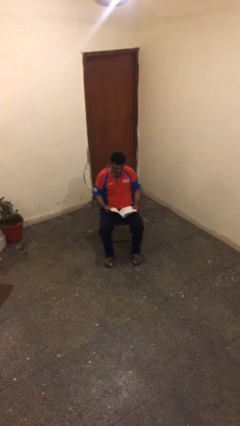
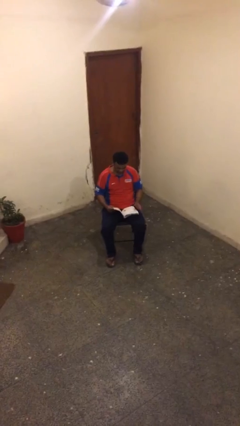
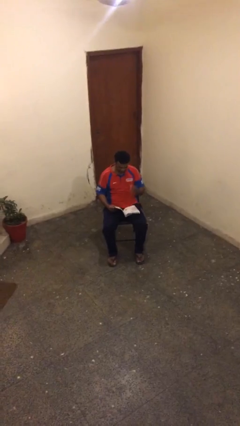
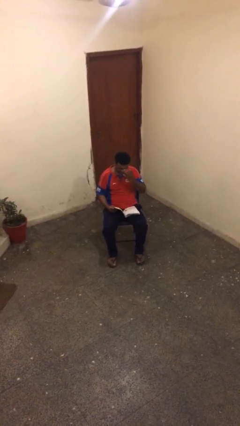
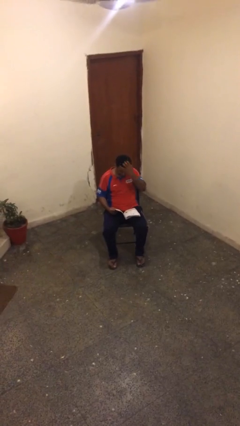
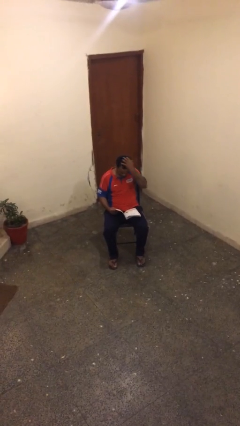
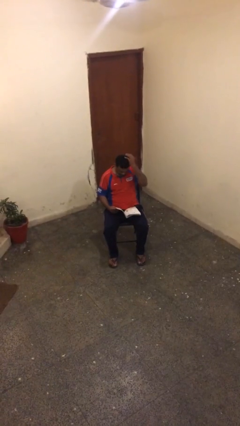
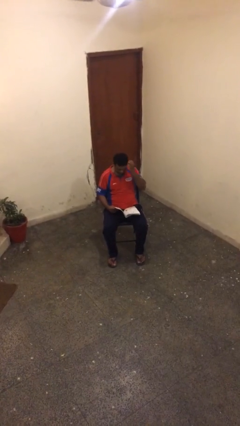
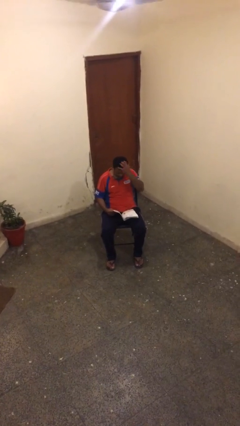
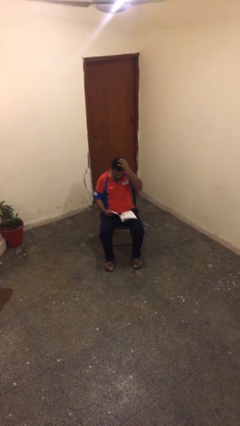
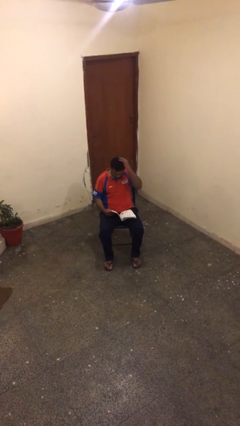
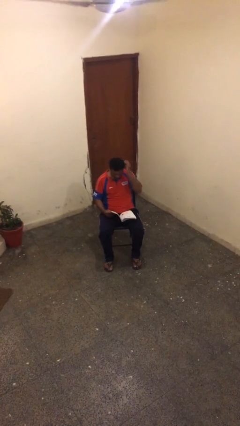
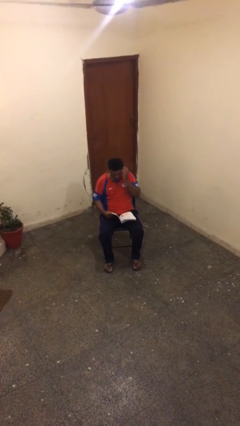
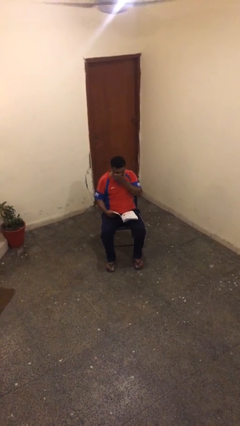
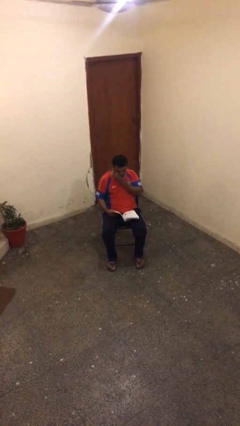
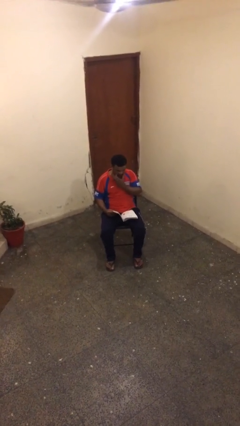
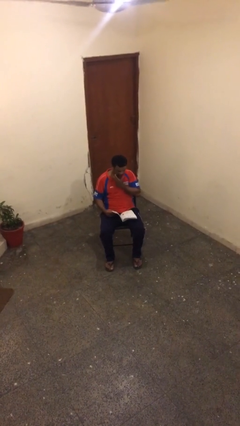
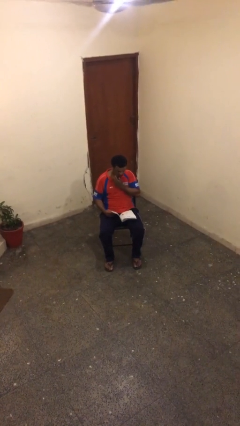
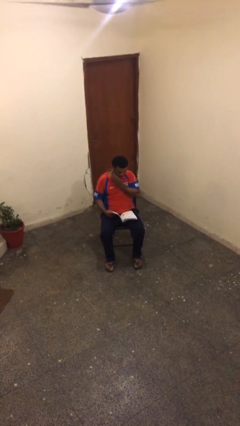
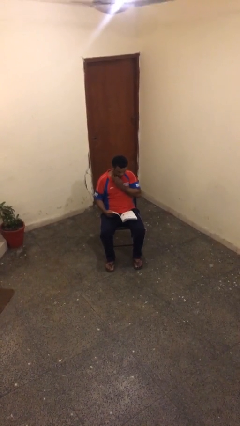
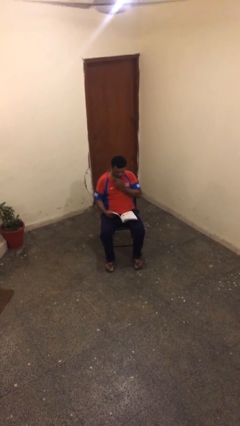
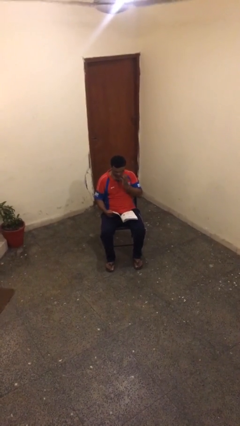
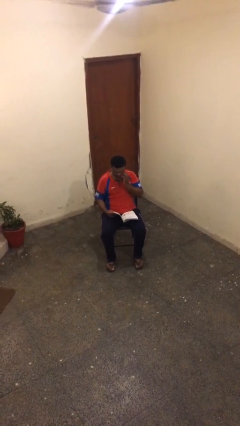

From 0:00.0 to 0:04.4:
person reads document

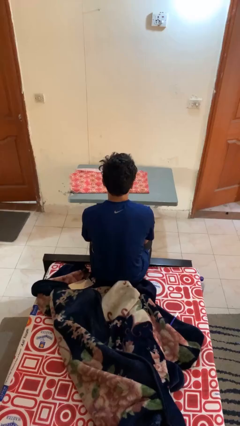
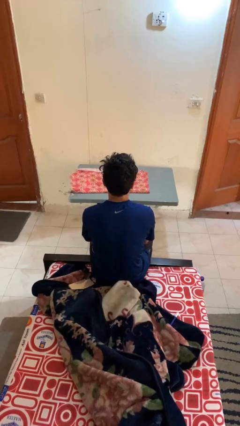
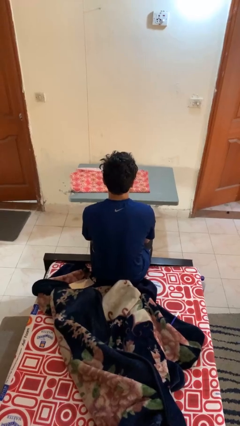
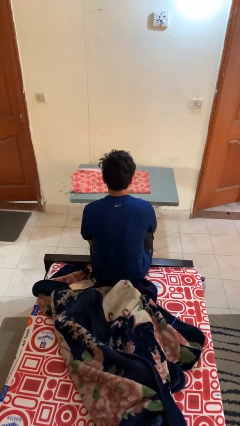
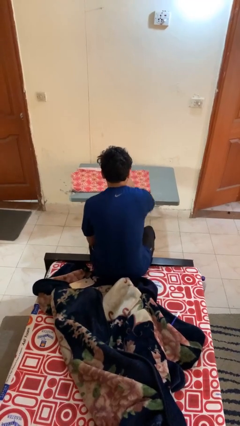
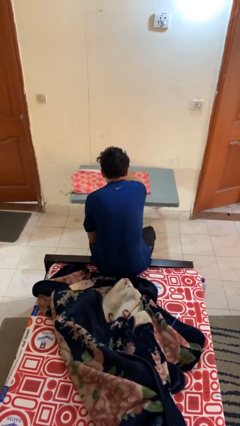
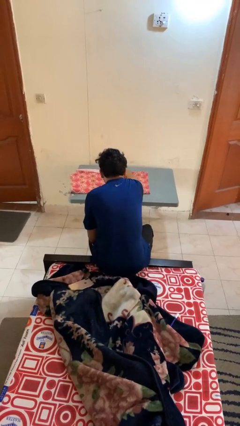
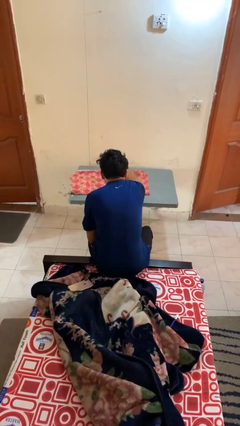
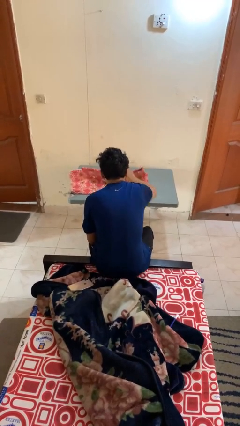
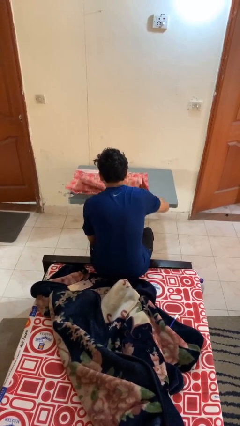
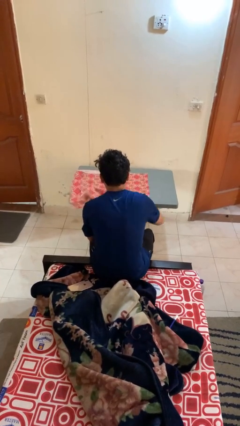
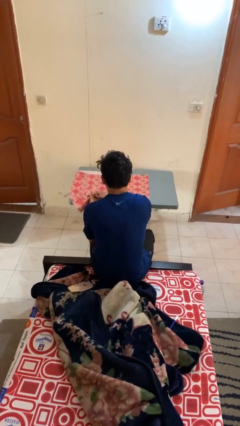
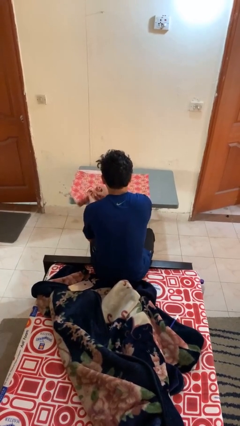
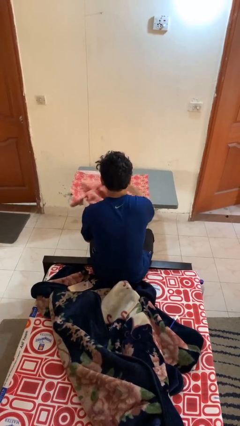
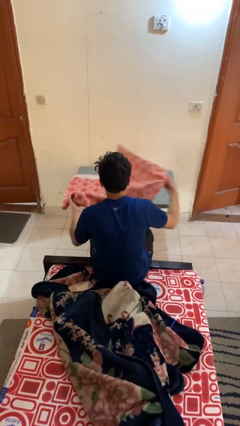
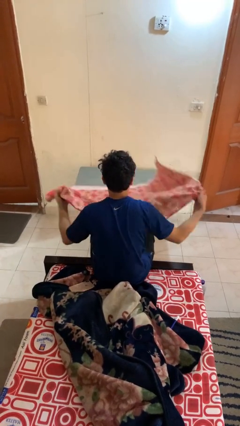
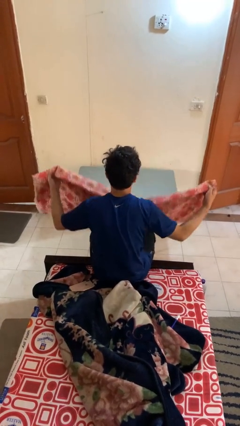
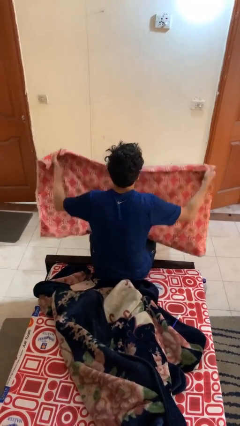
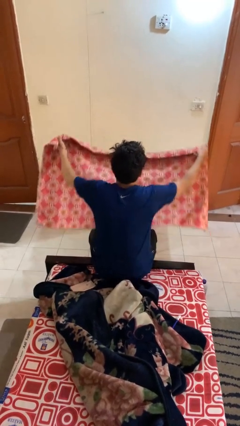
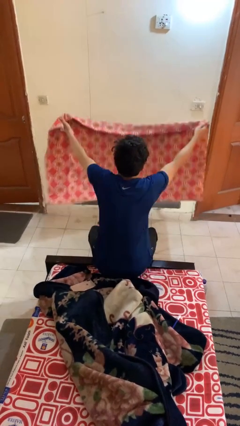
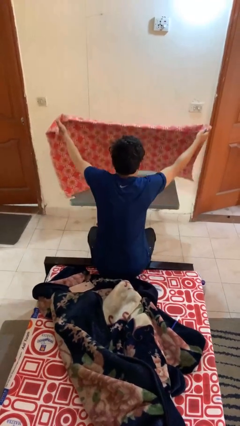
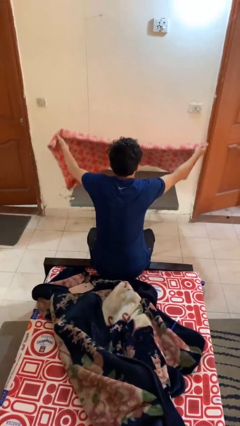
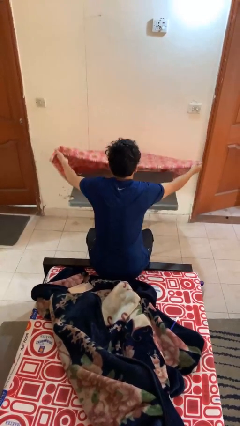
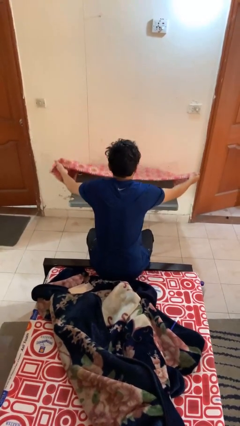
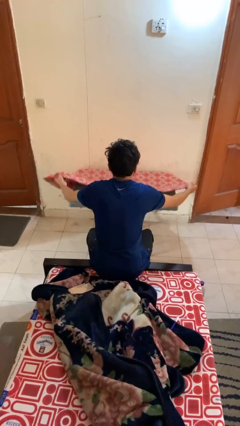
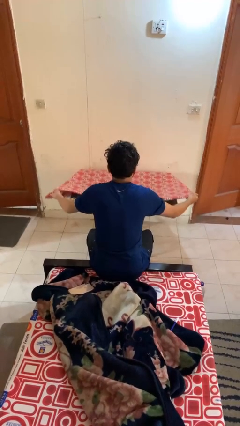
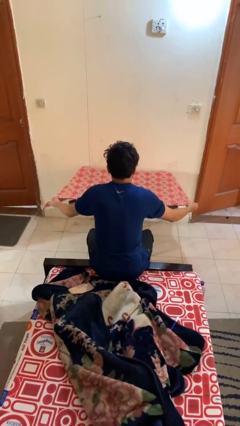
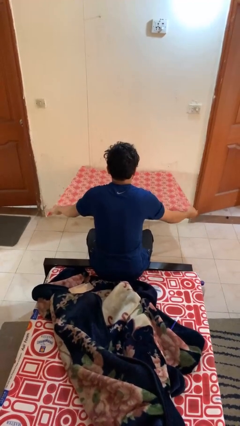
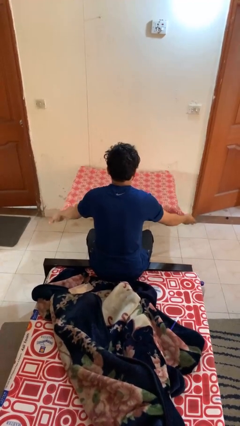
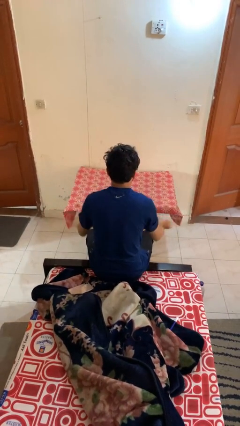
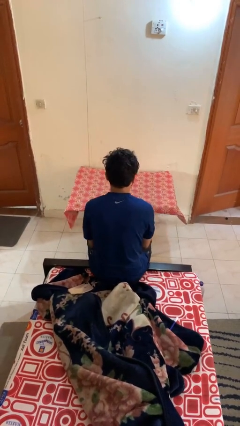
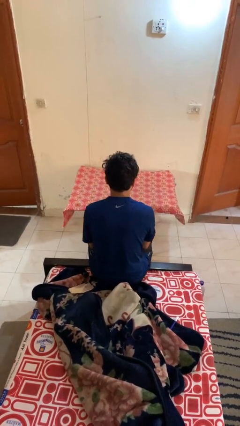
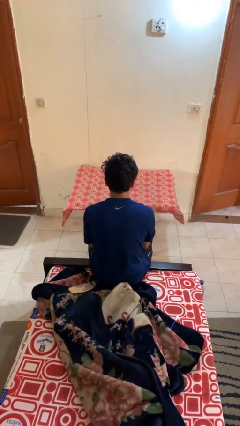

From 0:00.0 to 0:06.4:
person spreads tablecloth

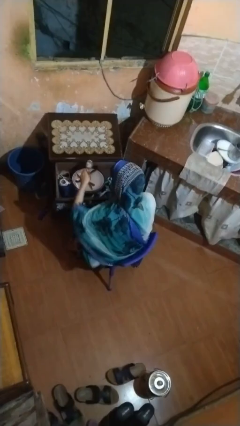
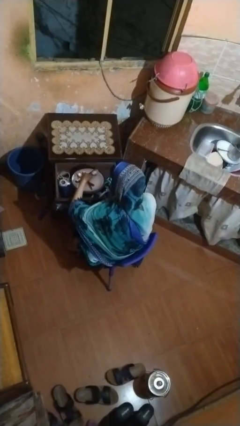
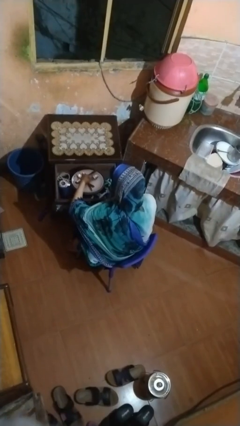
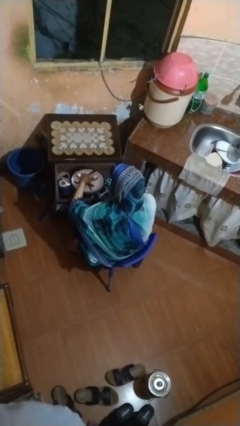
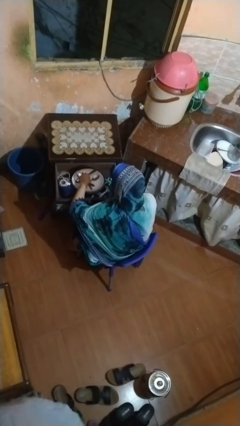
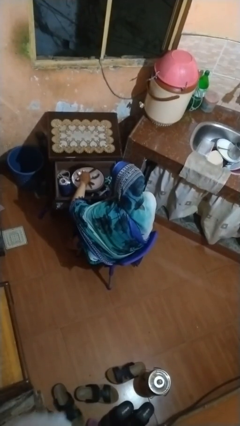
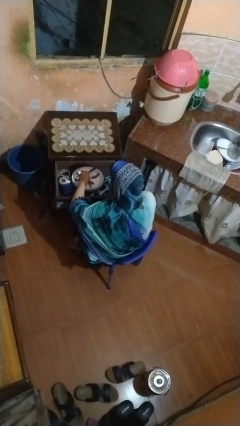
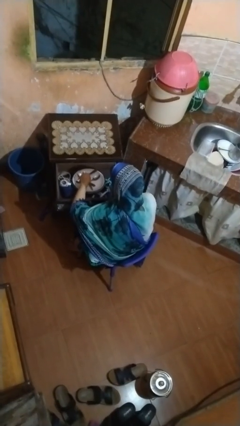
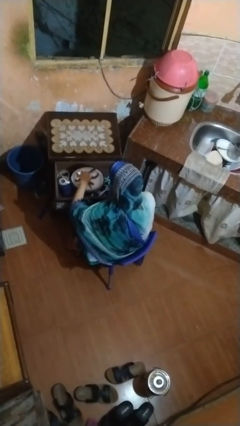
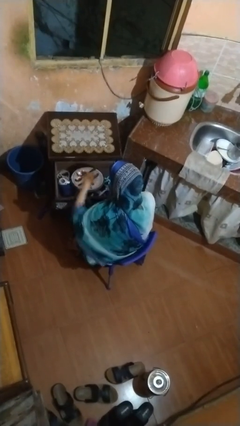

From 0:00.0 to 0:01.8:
person puts object into kitchen drawer

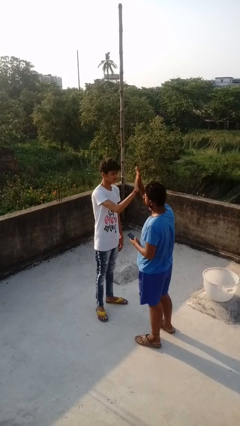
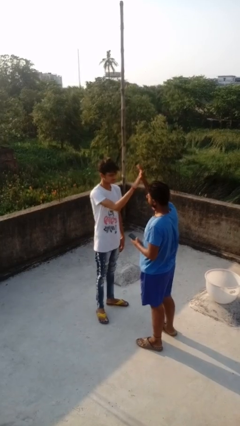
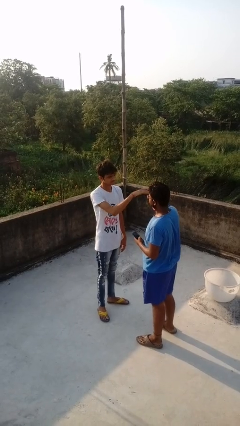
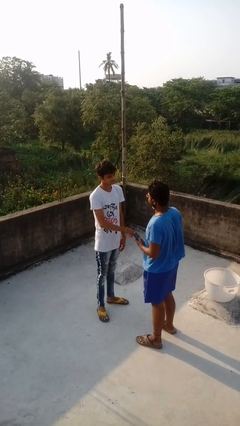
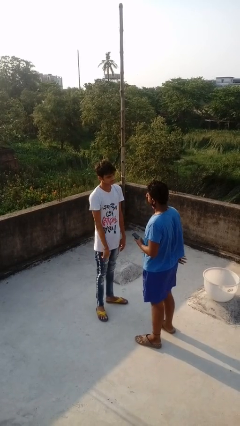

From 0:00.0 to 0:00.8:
person highfives hand

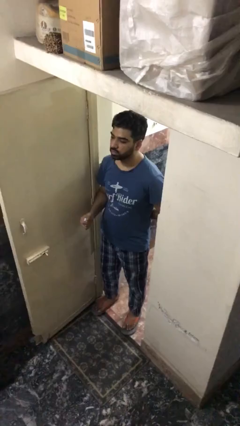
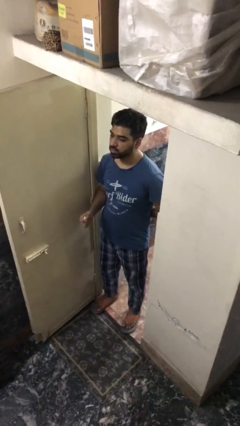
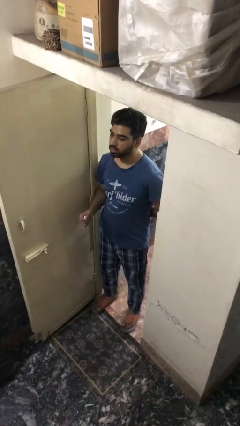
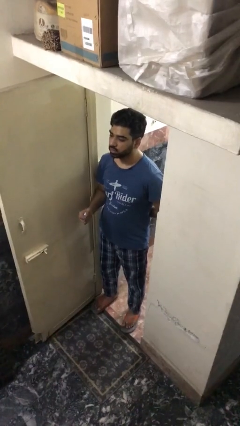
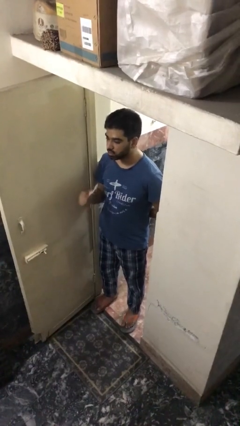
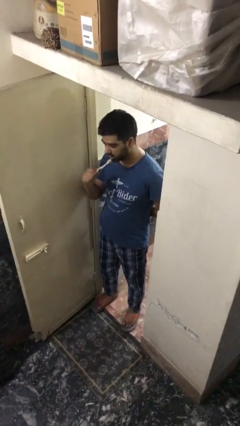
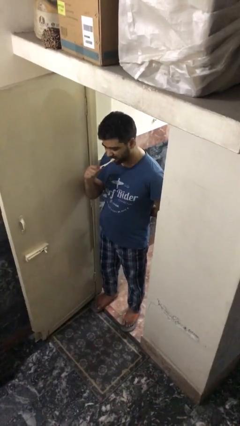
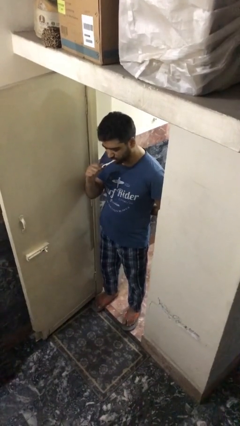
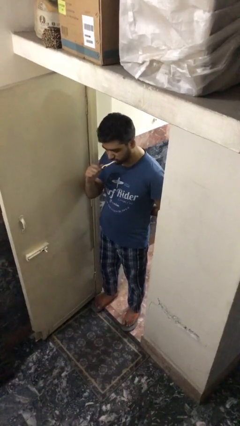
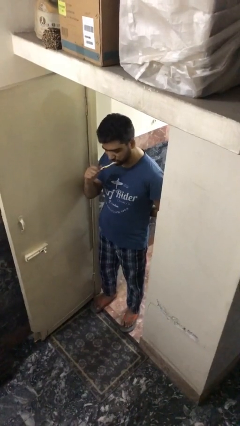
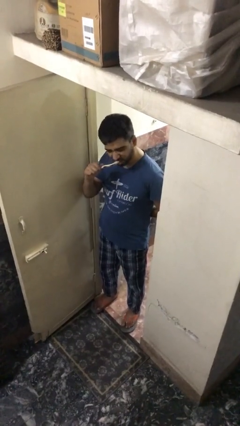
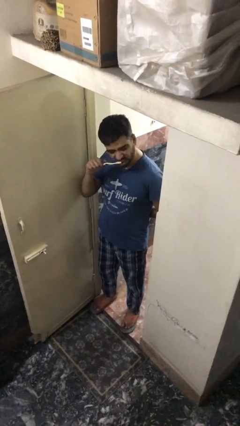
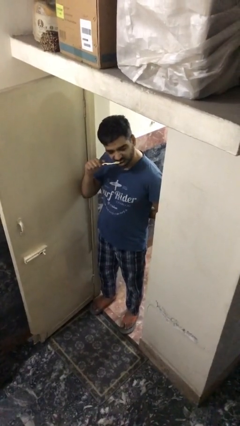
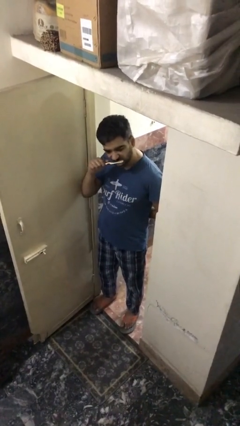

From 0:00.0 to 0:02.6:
person brushes teeth

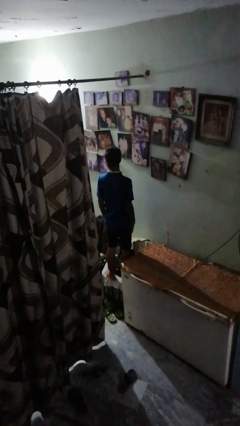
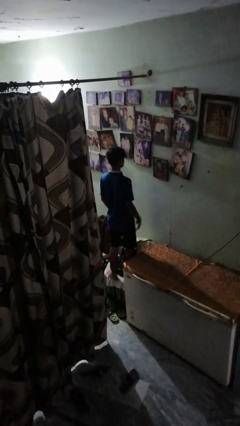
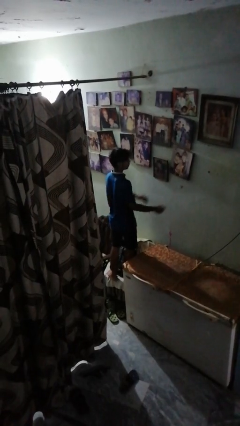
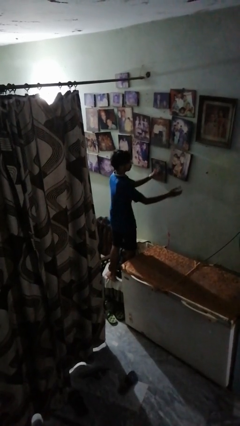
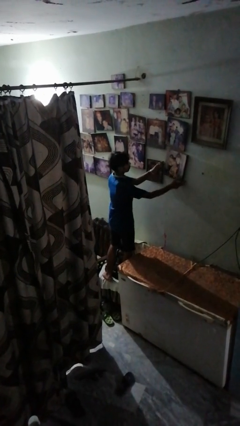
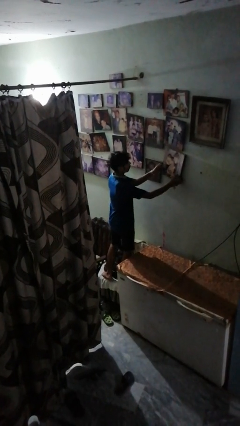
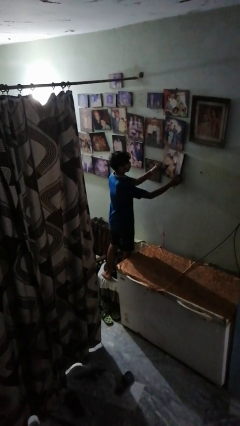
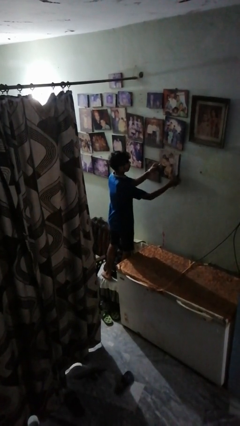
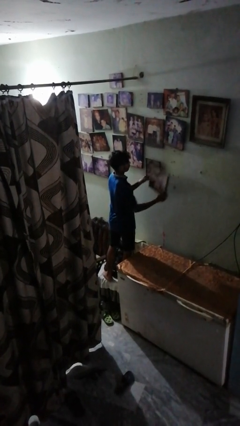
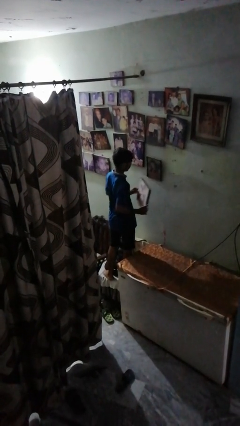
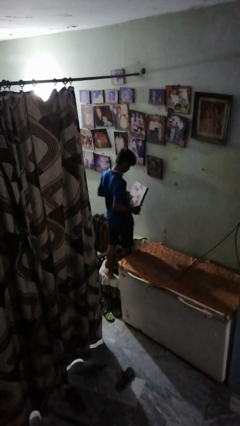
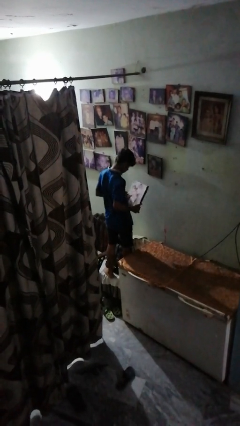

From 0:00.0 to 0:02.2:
person takes down picture frame
